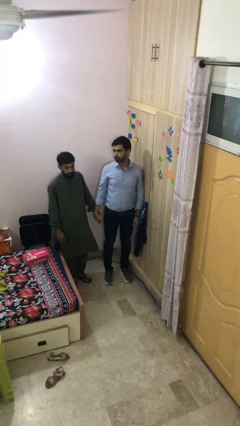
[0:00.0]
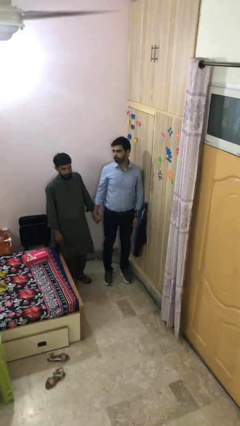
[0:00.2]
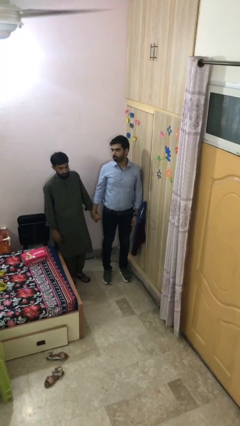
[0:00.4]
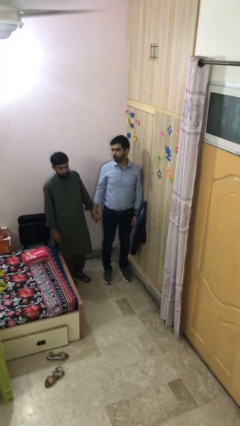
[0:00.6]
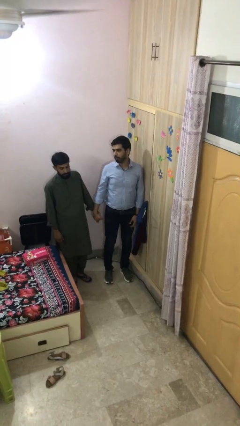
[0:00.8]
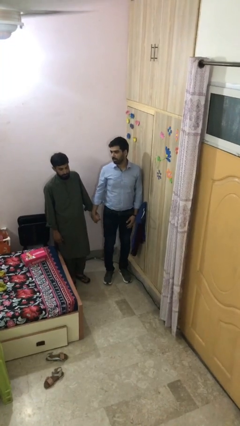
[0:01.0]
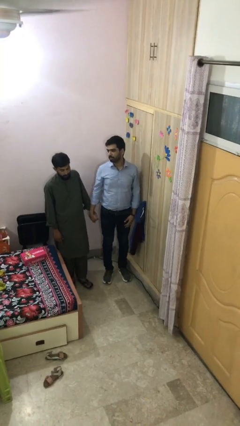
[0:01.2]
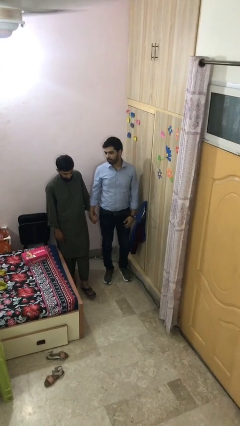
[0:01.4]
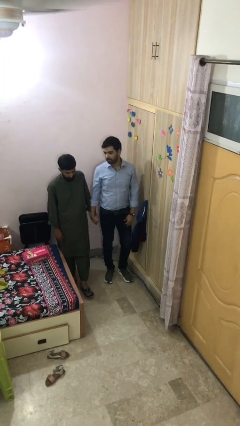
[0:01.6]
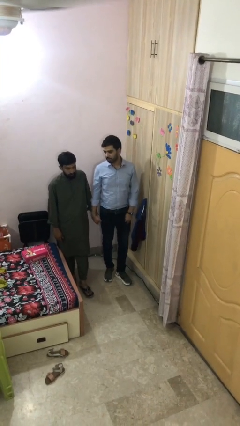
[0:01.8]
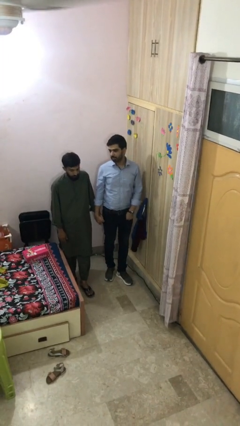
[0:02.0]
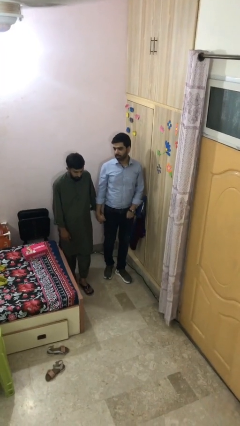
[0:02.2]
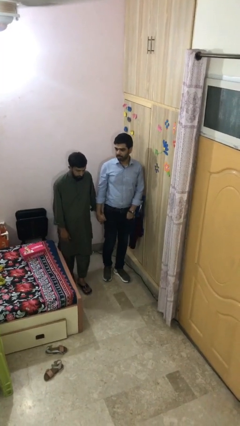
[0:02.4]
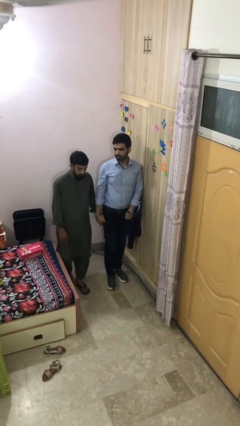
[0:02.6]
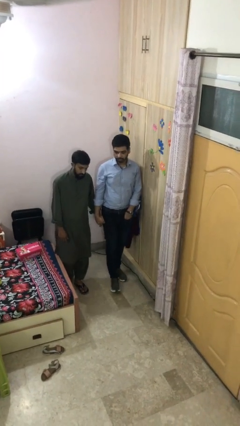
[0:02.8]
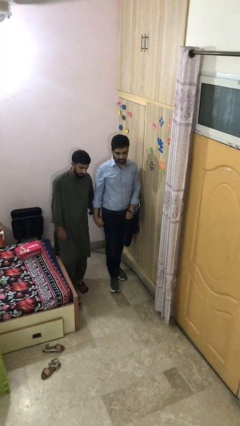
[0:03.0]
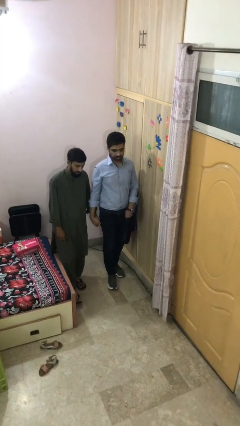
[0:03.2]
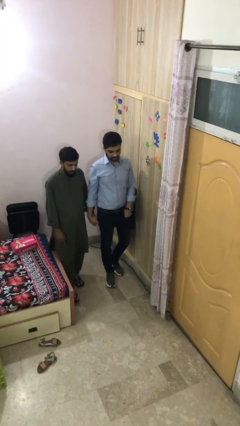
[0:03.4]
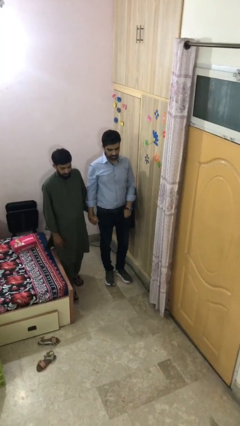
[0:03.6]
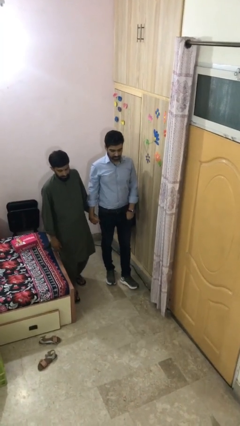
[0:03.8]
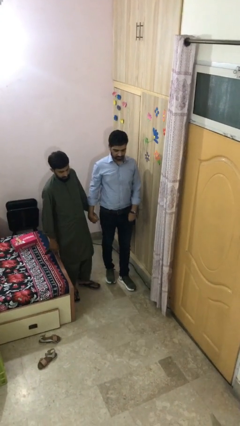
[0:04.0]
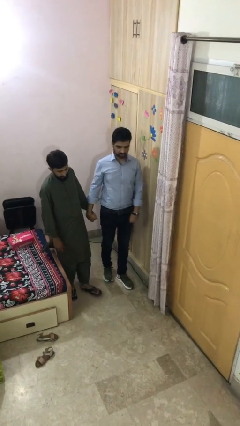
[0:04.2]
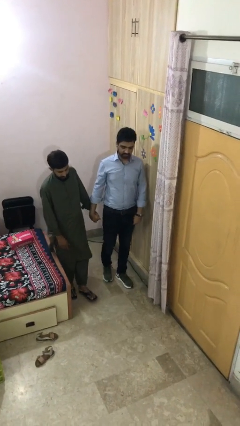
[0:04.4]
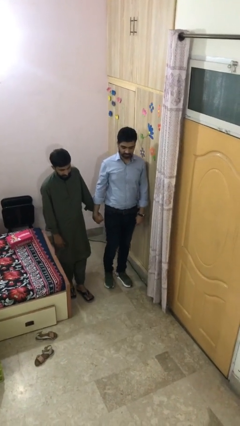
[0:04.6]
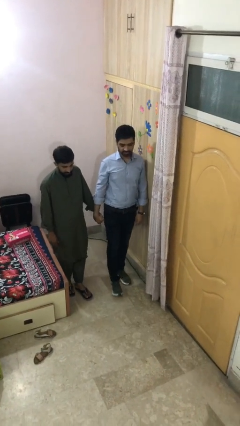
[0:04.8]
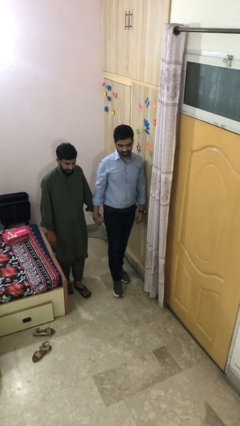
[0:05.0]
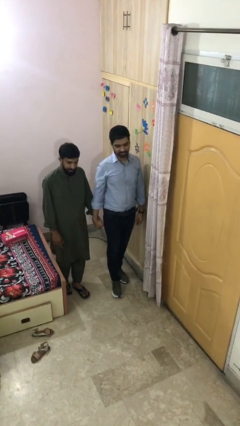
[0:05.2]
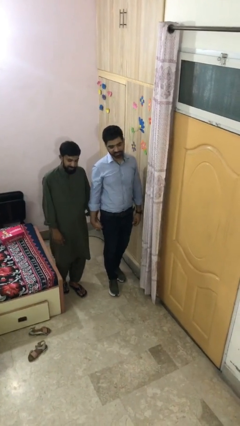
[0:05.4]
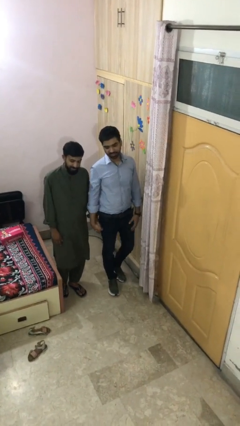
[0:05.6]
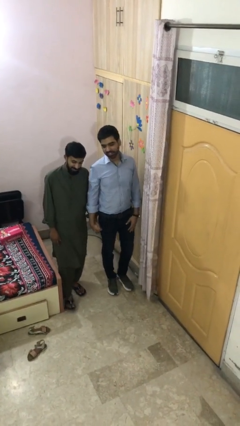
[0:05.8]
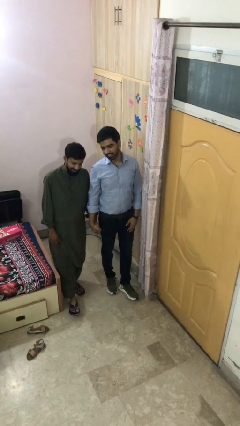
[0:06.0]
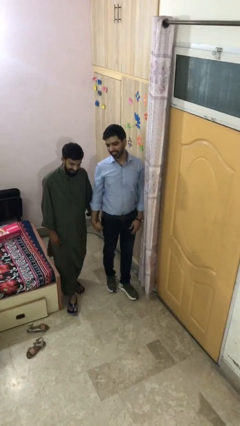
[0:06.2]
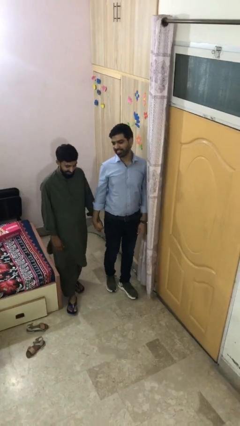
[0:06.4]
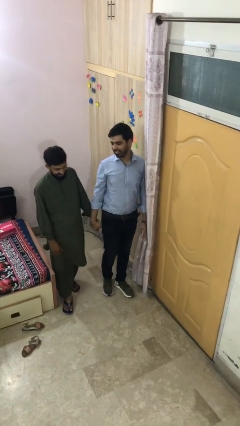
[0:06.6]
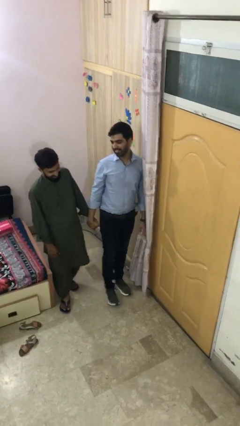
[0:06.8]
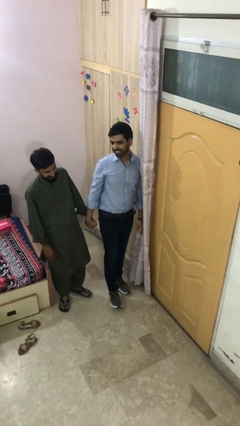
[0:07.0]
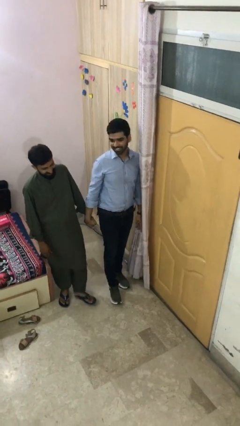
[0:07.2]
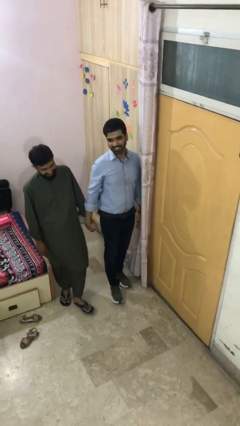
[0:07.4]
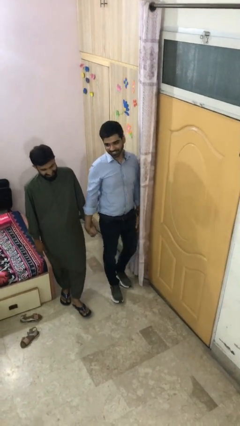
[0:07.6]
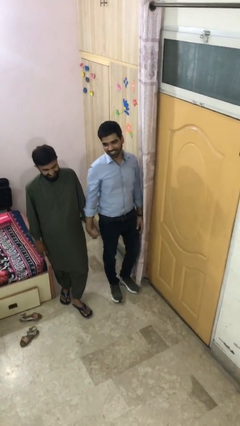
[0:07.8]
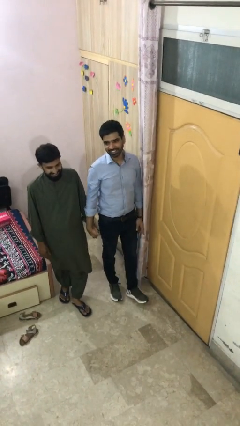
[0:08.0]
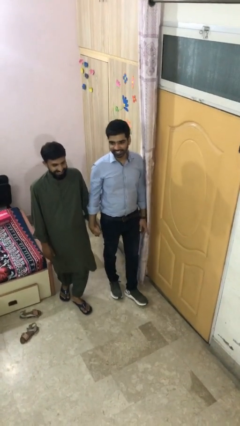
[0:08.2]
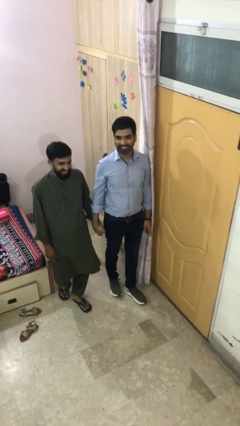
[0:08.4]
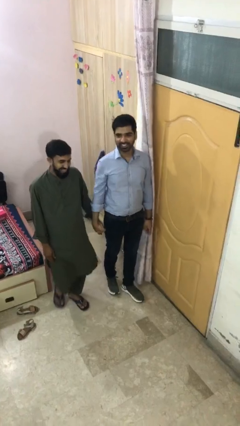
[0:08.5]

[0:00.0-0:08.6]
person holds hand

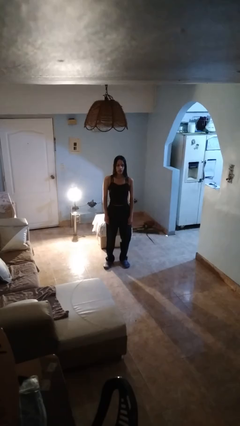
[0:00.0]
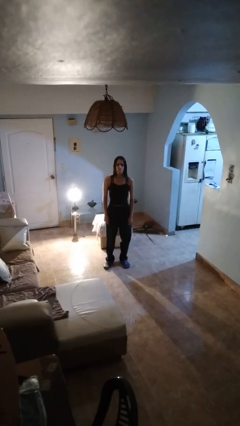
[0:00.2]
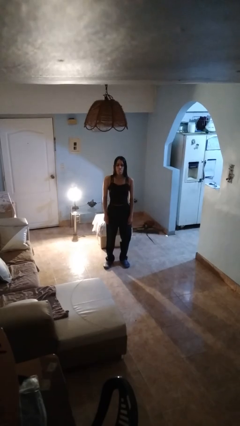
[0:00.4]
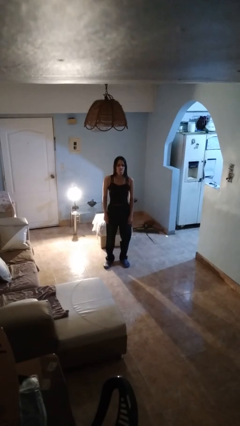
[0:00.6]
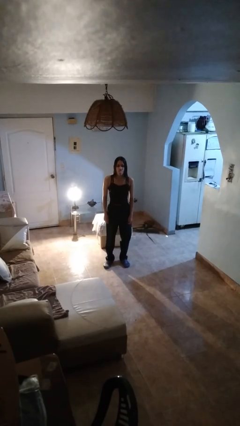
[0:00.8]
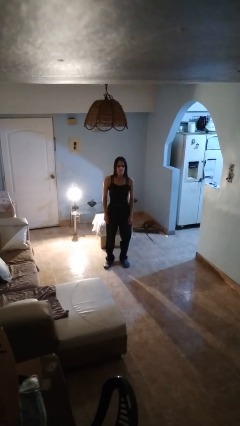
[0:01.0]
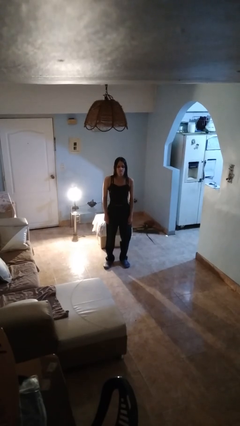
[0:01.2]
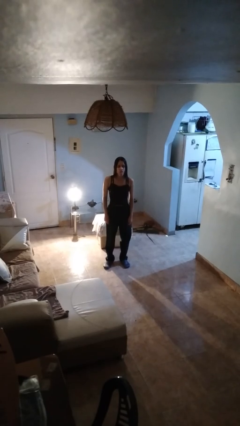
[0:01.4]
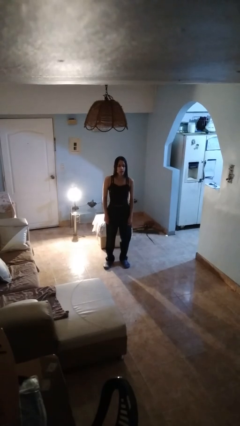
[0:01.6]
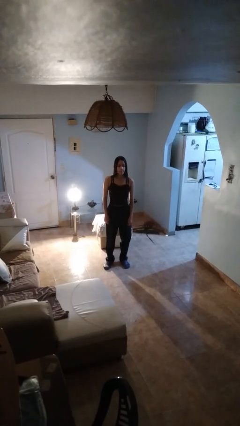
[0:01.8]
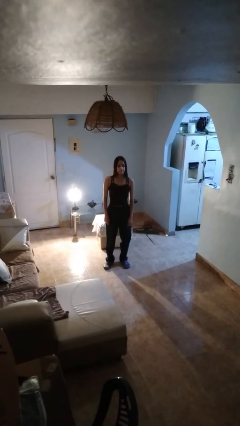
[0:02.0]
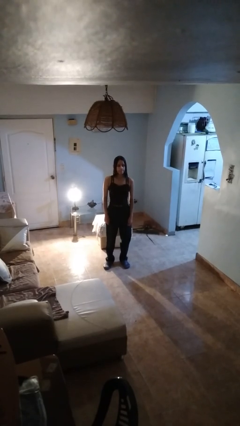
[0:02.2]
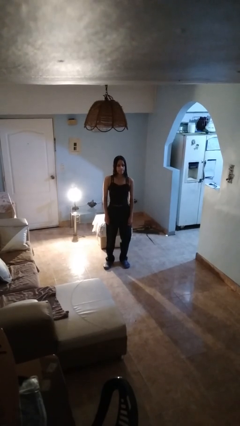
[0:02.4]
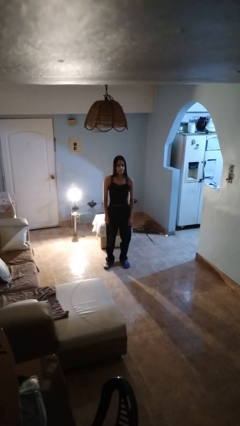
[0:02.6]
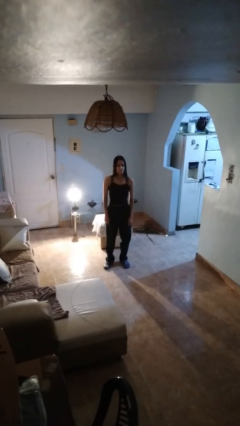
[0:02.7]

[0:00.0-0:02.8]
person sticks out tongue

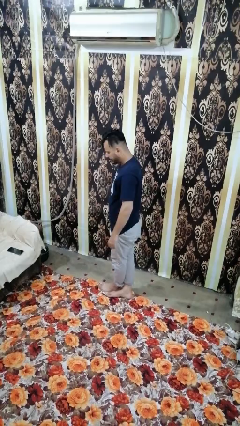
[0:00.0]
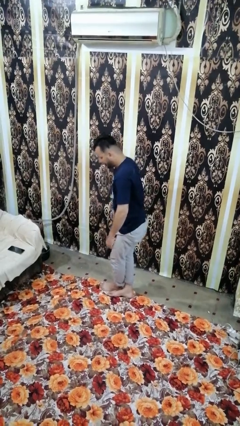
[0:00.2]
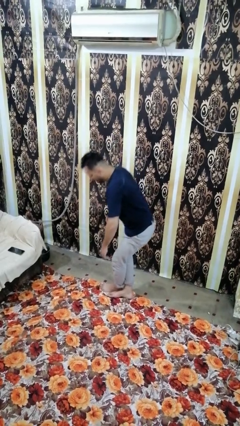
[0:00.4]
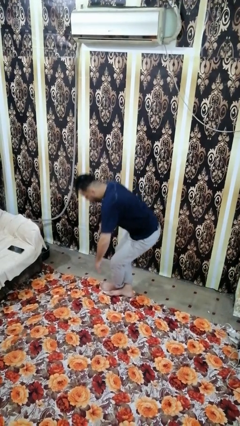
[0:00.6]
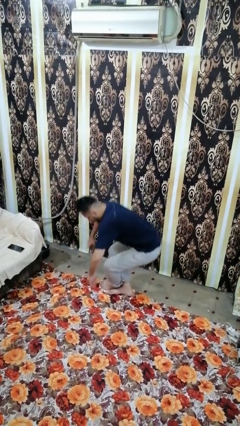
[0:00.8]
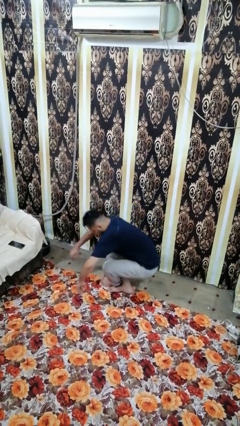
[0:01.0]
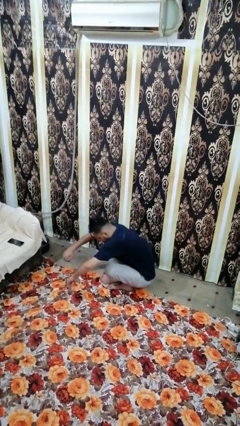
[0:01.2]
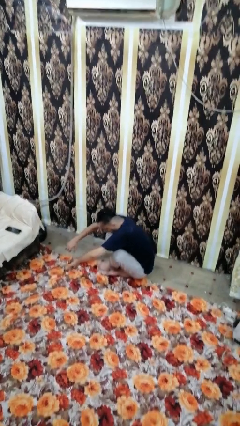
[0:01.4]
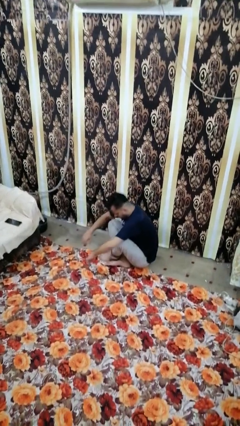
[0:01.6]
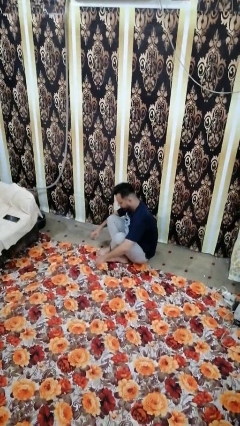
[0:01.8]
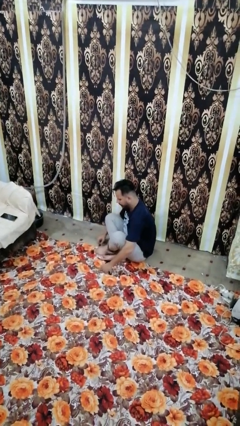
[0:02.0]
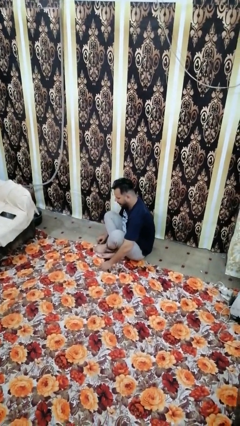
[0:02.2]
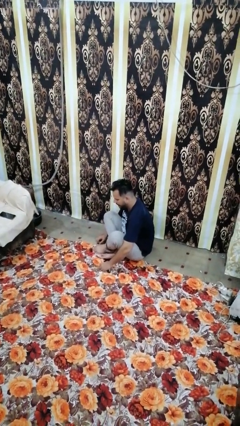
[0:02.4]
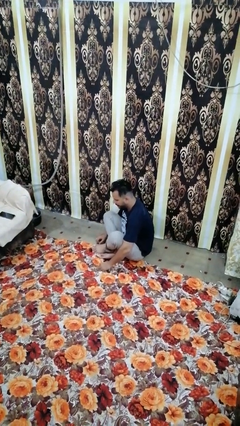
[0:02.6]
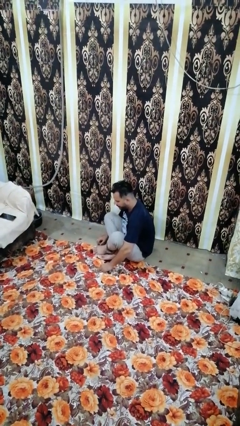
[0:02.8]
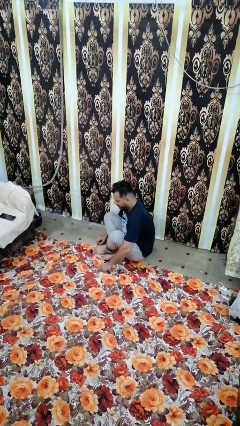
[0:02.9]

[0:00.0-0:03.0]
person sits crisscross

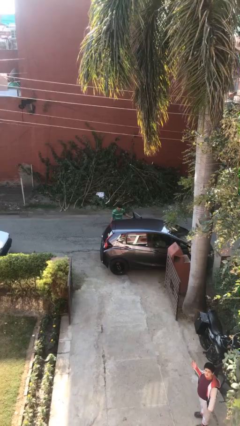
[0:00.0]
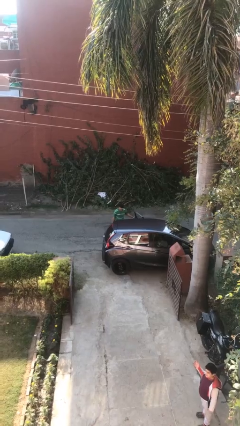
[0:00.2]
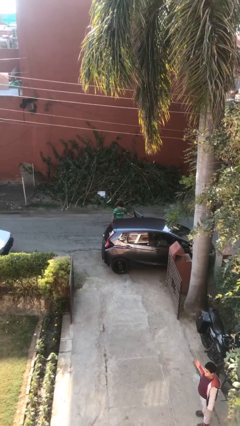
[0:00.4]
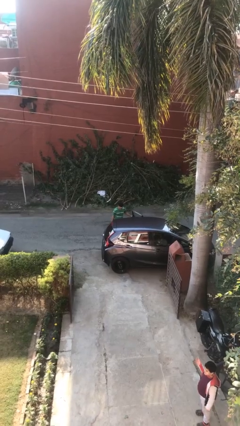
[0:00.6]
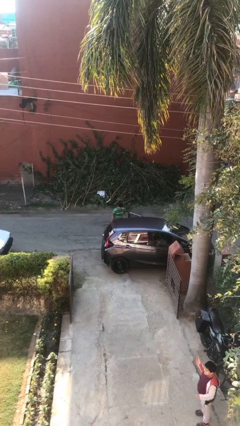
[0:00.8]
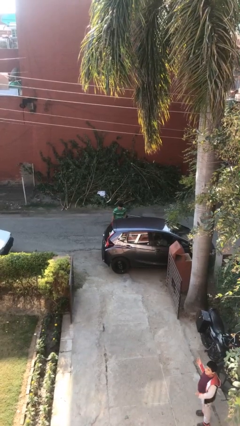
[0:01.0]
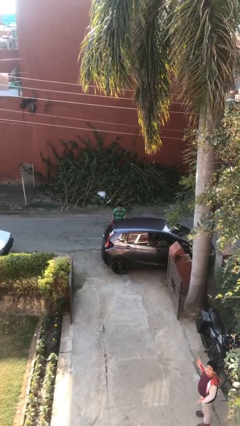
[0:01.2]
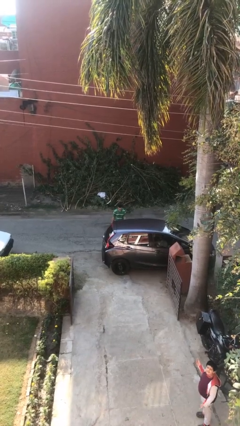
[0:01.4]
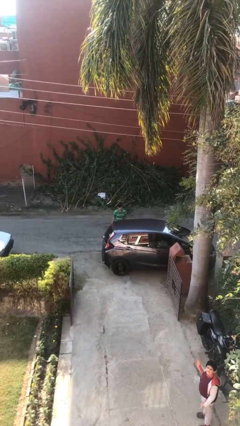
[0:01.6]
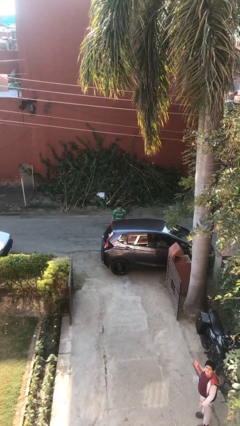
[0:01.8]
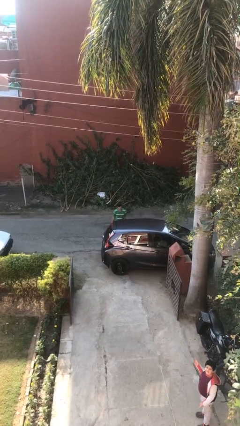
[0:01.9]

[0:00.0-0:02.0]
person closes car door

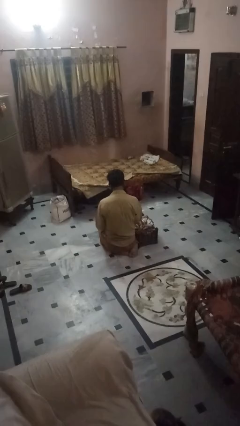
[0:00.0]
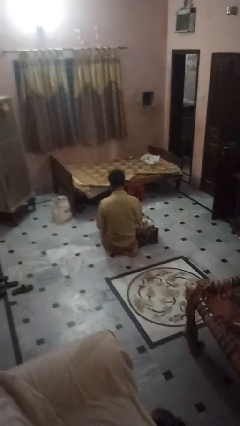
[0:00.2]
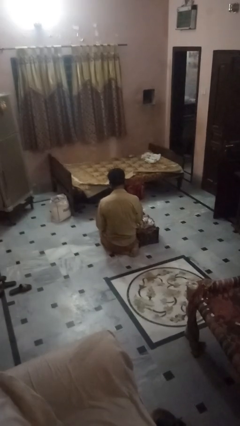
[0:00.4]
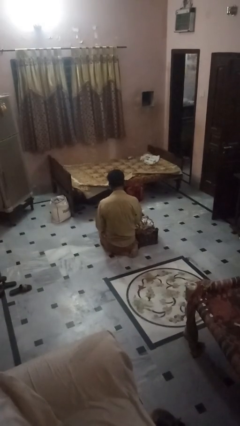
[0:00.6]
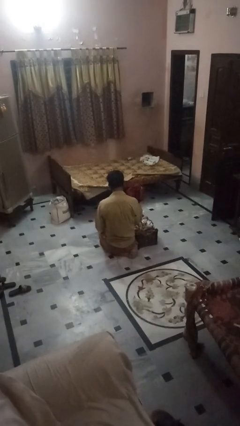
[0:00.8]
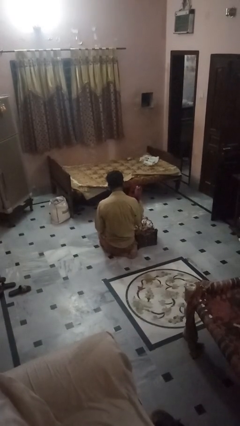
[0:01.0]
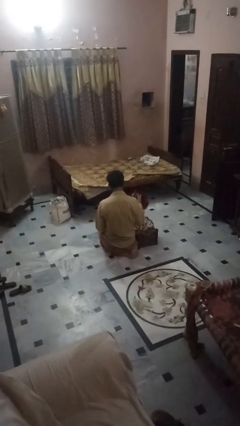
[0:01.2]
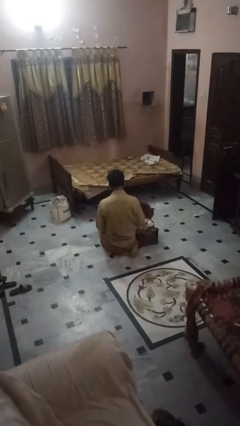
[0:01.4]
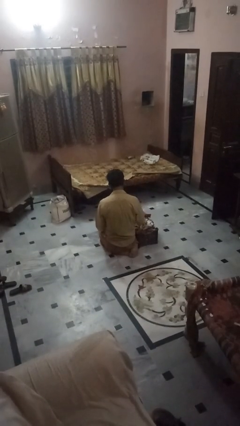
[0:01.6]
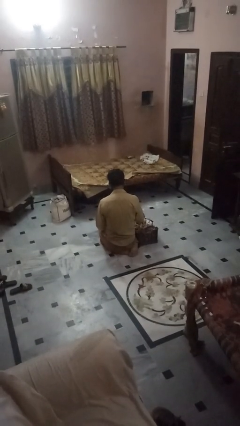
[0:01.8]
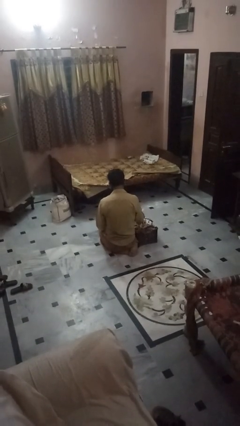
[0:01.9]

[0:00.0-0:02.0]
person puts object into bag
